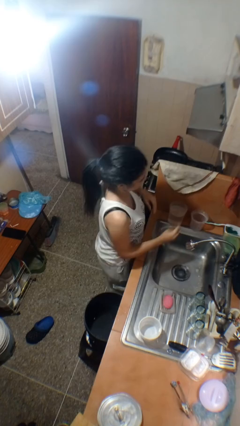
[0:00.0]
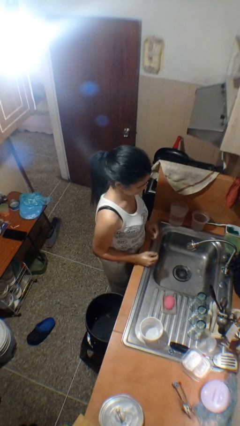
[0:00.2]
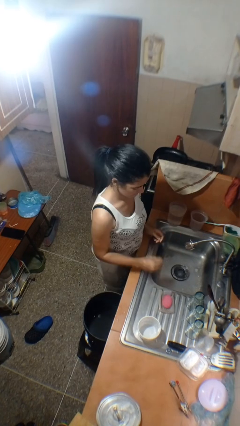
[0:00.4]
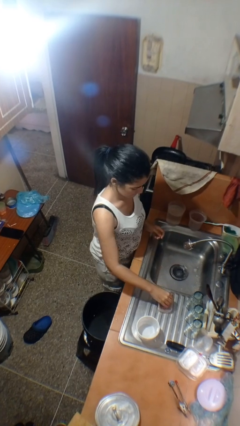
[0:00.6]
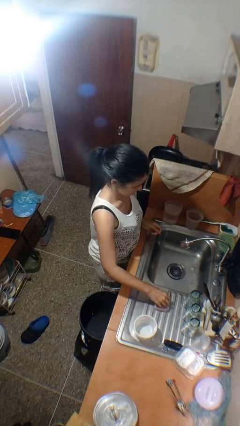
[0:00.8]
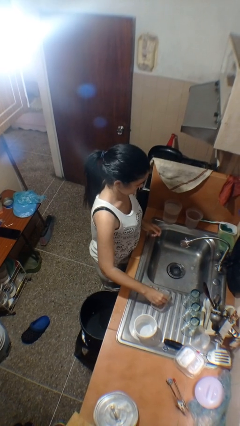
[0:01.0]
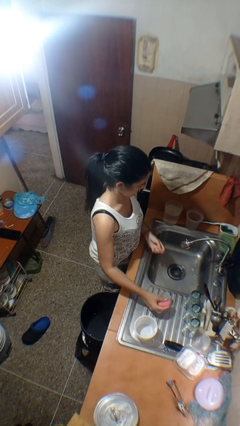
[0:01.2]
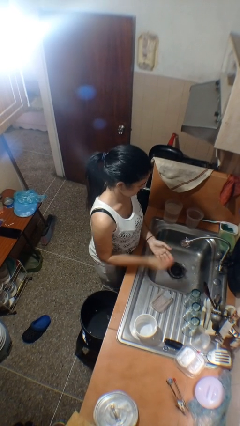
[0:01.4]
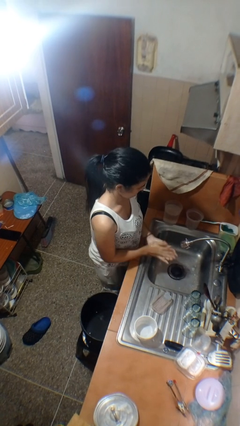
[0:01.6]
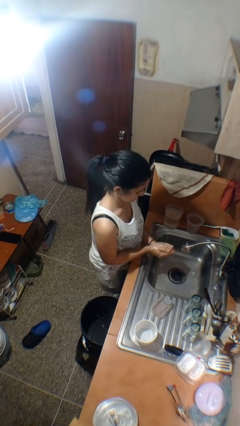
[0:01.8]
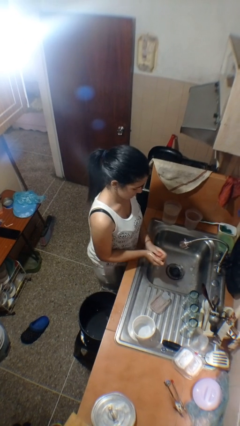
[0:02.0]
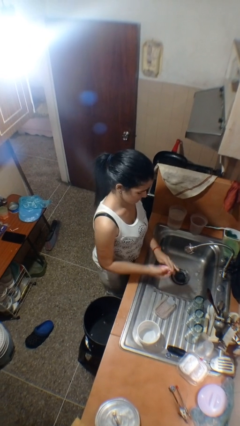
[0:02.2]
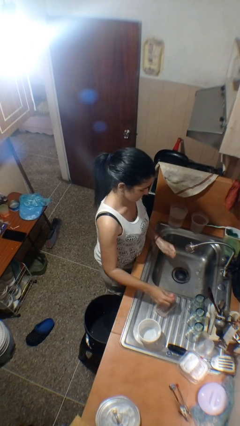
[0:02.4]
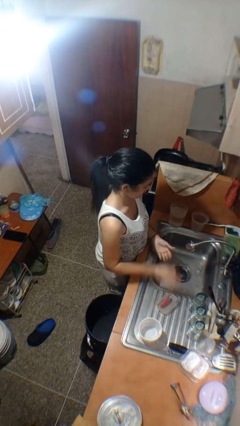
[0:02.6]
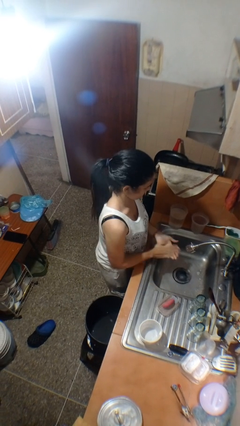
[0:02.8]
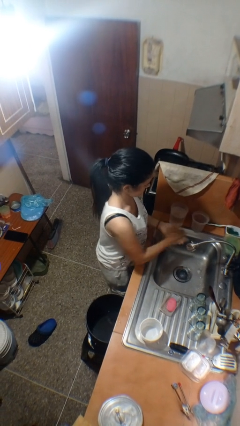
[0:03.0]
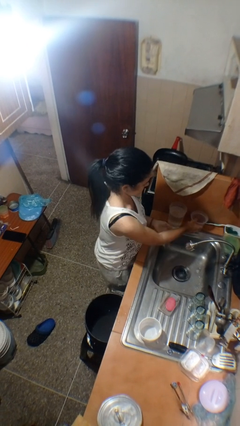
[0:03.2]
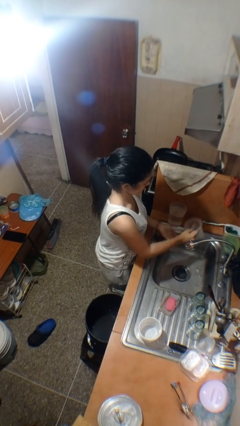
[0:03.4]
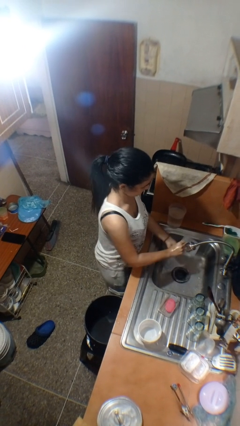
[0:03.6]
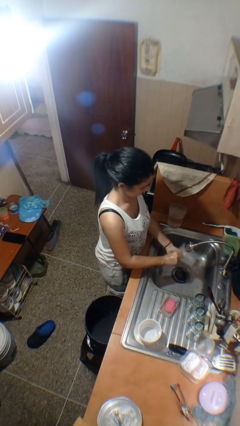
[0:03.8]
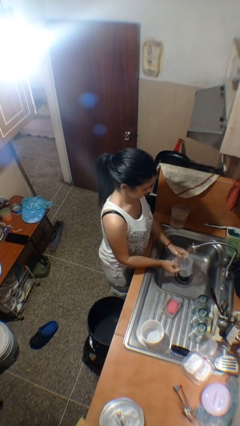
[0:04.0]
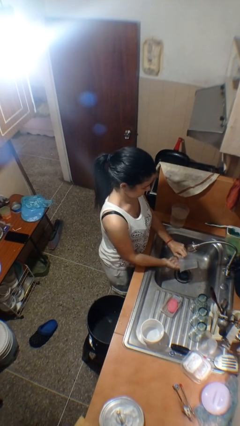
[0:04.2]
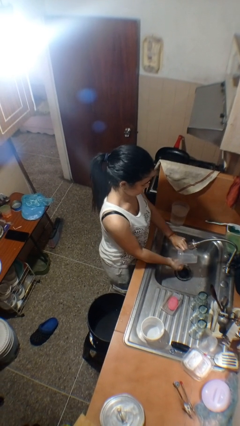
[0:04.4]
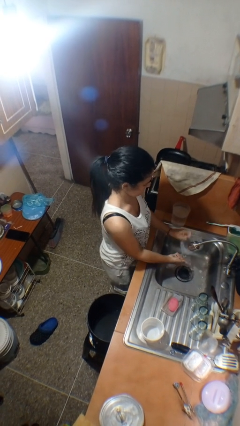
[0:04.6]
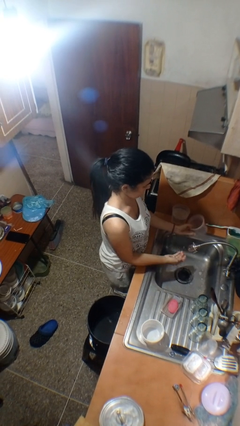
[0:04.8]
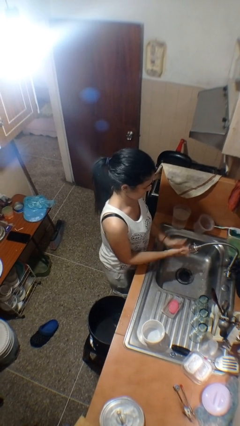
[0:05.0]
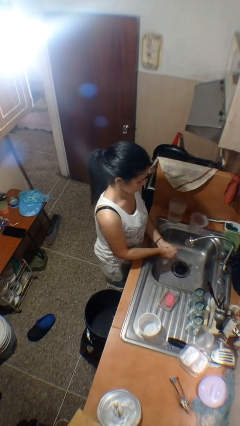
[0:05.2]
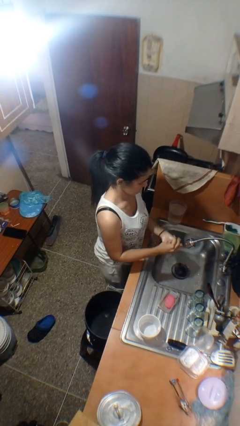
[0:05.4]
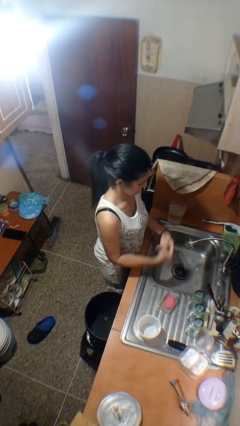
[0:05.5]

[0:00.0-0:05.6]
person washes hands

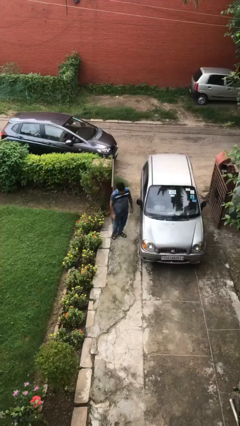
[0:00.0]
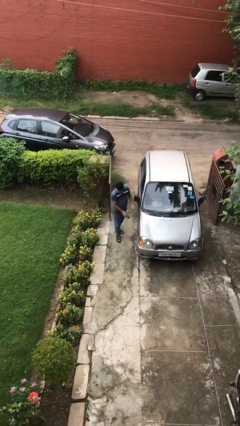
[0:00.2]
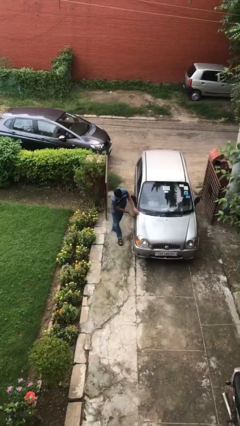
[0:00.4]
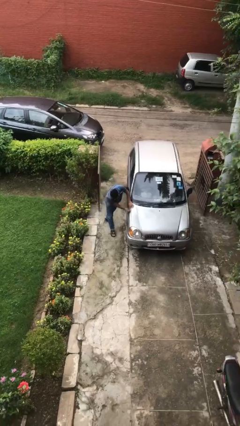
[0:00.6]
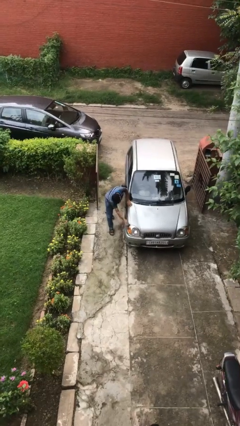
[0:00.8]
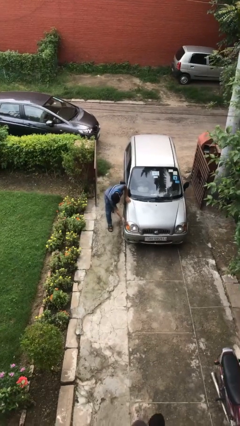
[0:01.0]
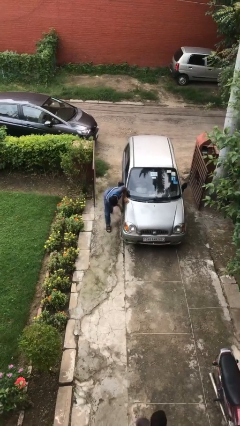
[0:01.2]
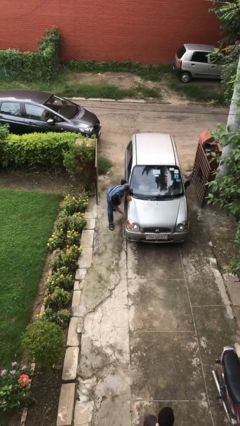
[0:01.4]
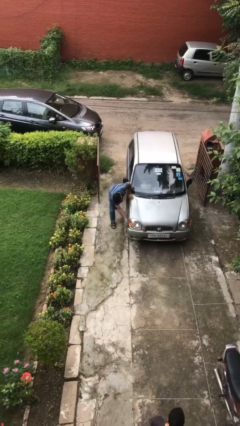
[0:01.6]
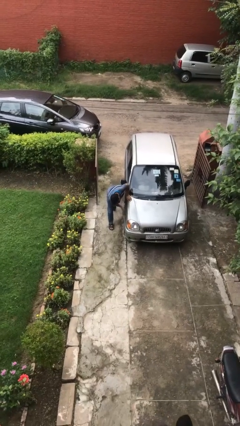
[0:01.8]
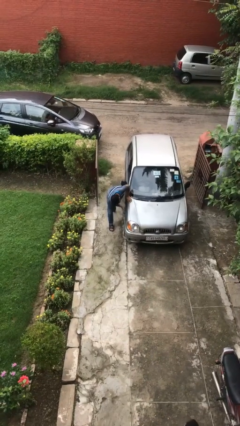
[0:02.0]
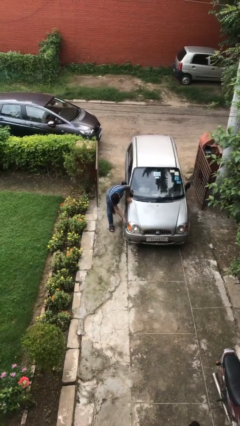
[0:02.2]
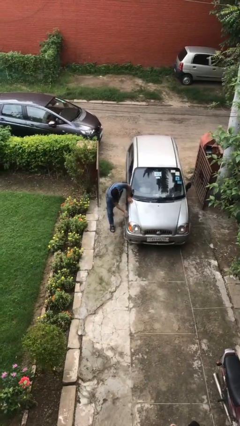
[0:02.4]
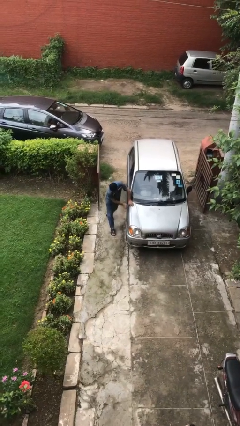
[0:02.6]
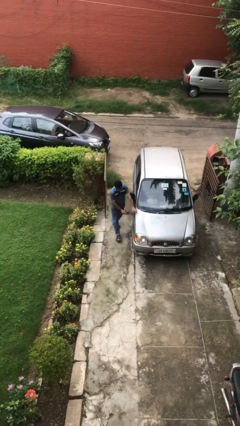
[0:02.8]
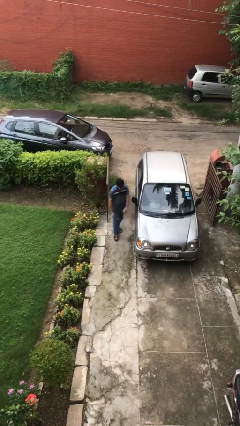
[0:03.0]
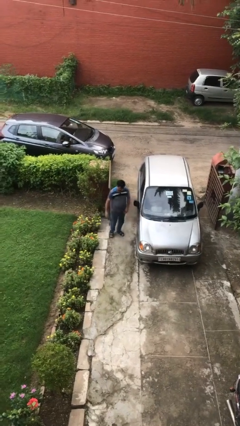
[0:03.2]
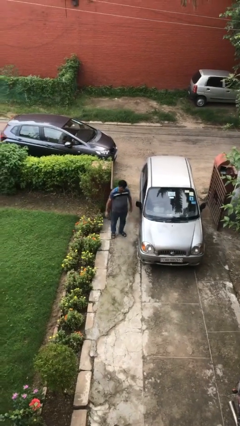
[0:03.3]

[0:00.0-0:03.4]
person polishes car with rag

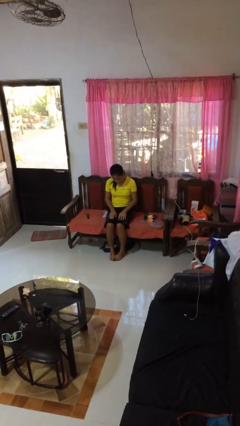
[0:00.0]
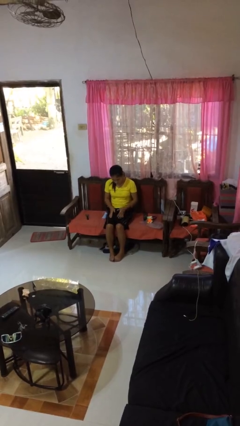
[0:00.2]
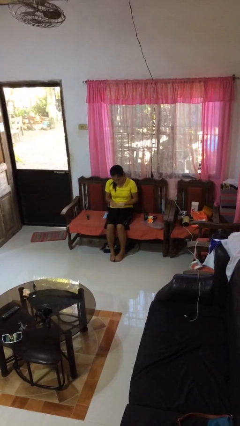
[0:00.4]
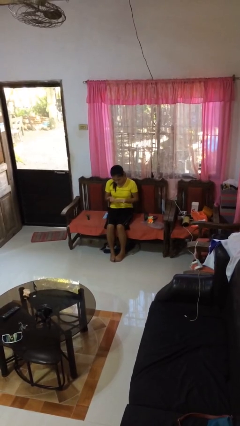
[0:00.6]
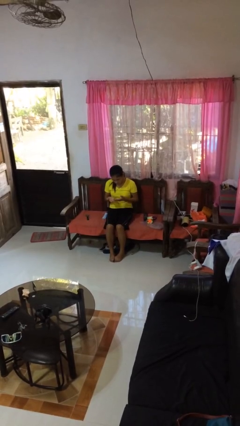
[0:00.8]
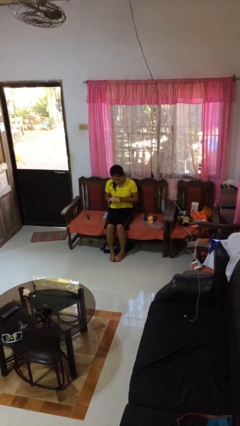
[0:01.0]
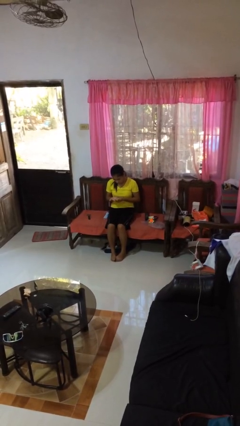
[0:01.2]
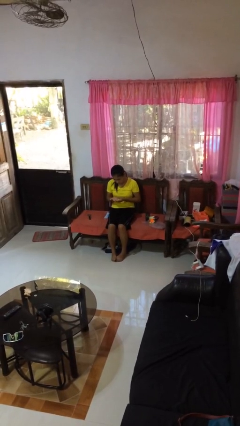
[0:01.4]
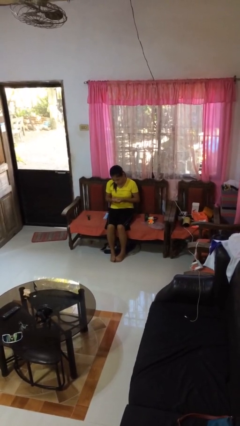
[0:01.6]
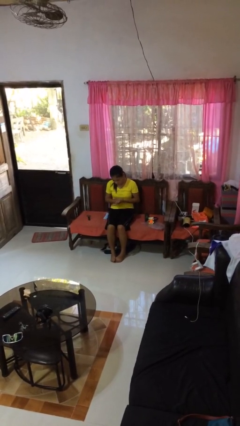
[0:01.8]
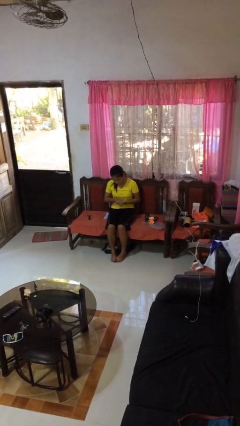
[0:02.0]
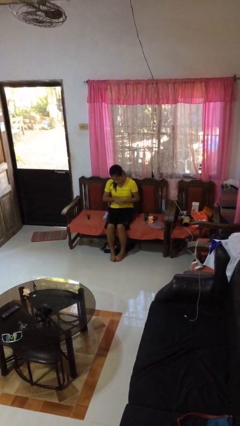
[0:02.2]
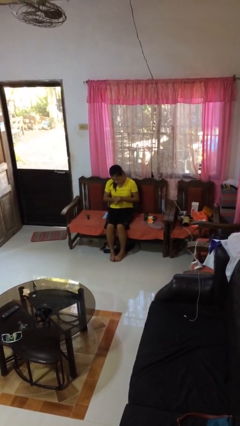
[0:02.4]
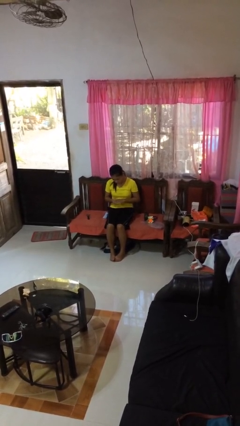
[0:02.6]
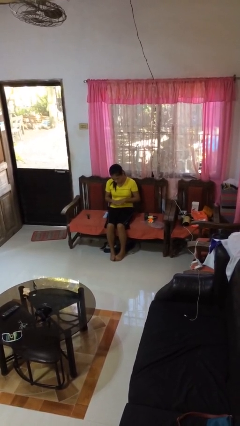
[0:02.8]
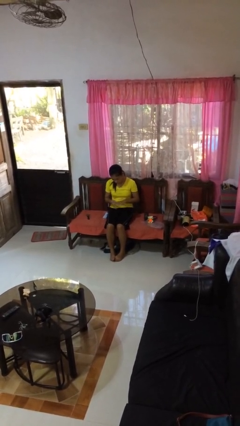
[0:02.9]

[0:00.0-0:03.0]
person looks at hands in lap

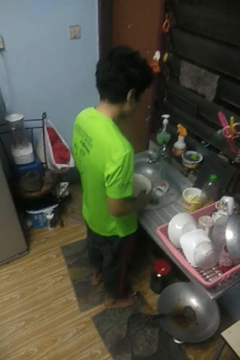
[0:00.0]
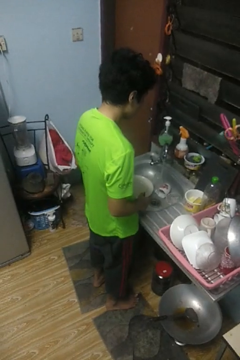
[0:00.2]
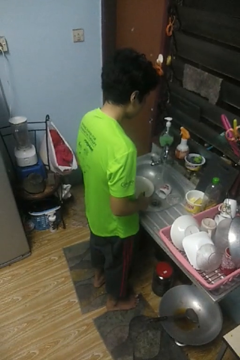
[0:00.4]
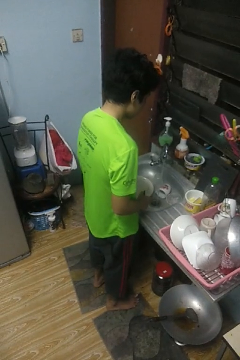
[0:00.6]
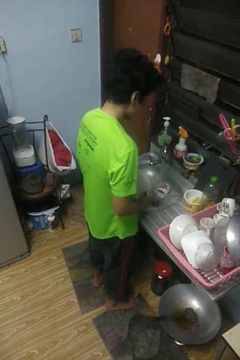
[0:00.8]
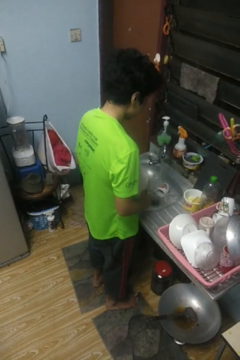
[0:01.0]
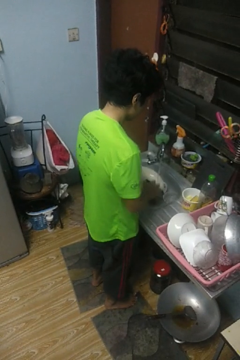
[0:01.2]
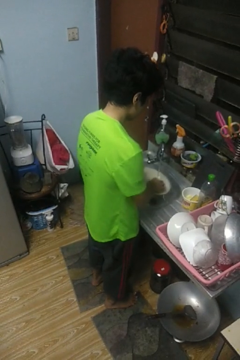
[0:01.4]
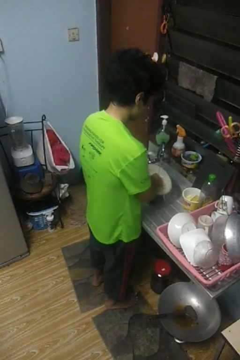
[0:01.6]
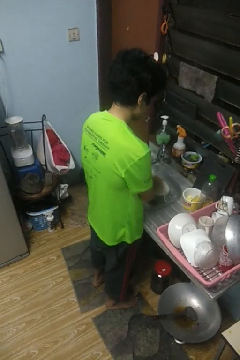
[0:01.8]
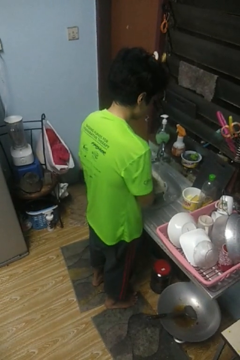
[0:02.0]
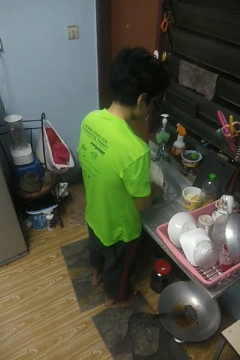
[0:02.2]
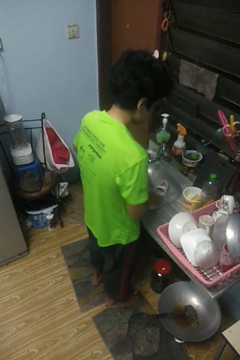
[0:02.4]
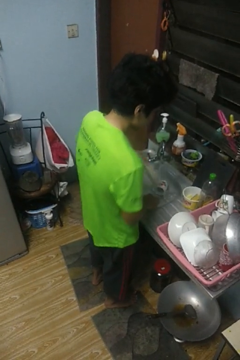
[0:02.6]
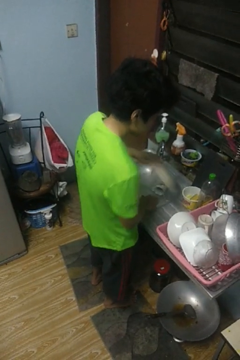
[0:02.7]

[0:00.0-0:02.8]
person washes dish

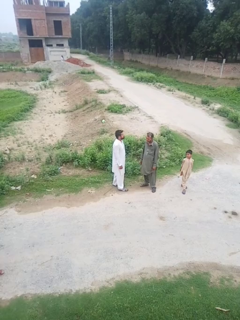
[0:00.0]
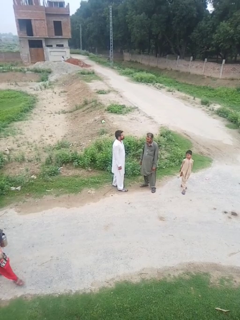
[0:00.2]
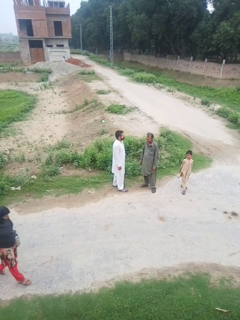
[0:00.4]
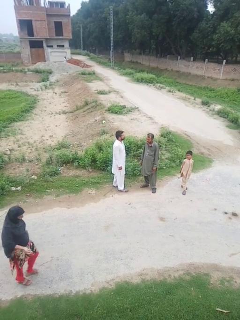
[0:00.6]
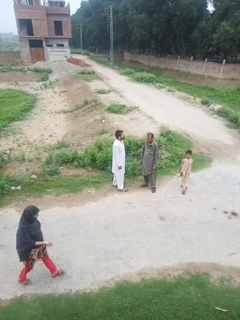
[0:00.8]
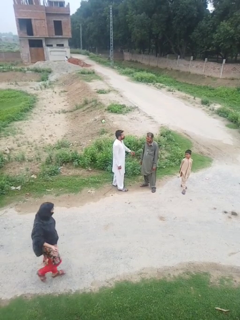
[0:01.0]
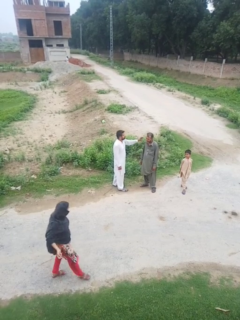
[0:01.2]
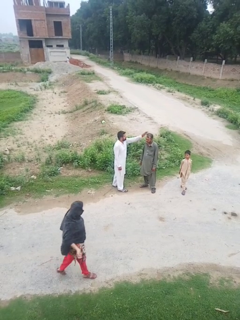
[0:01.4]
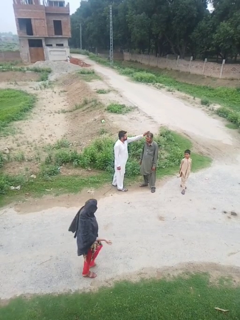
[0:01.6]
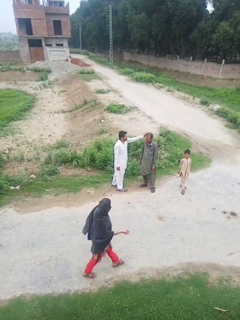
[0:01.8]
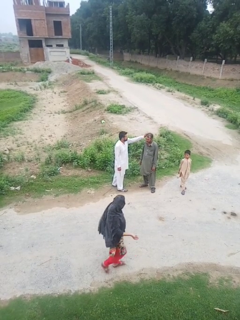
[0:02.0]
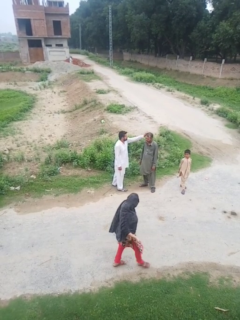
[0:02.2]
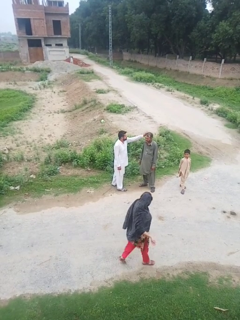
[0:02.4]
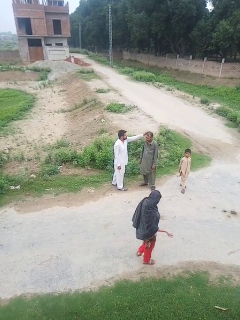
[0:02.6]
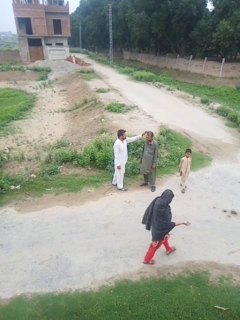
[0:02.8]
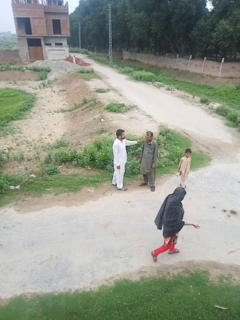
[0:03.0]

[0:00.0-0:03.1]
person touches face of person

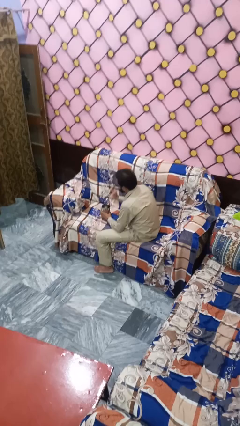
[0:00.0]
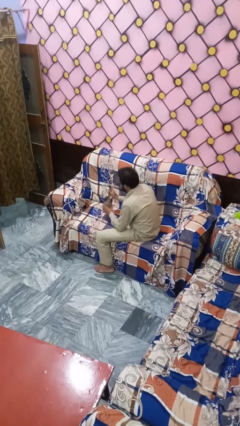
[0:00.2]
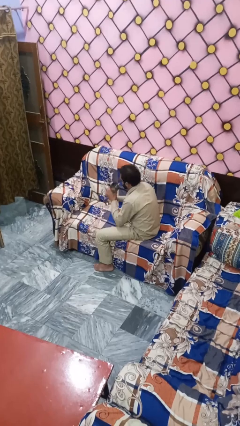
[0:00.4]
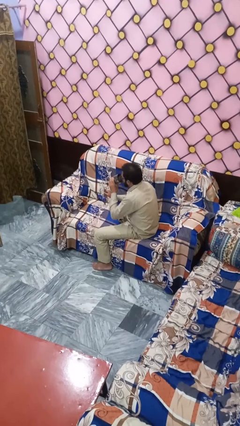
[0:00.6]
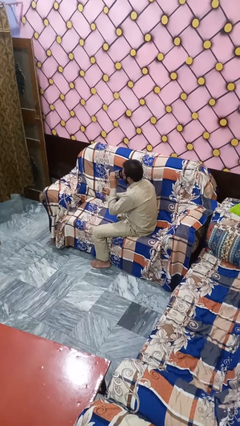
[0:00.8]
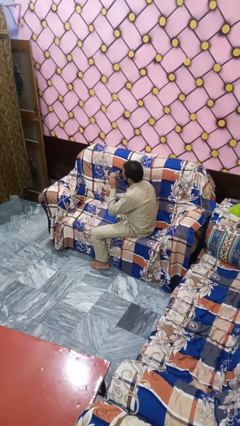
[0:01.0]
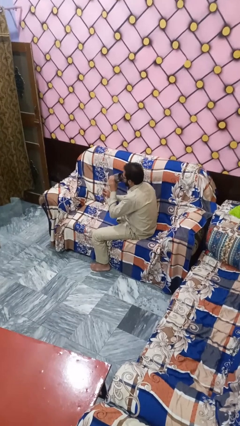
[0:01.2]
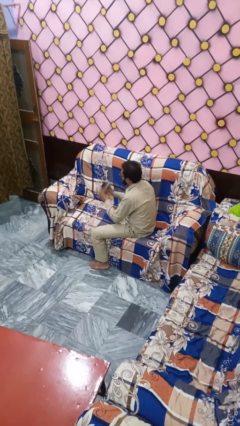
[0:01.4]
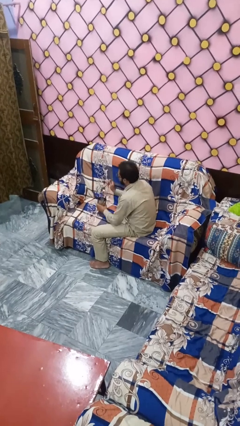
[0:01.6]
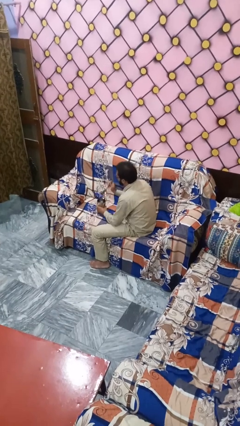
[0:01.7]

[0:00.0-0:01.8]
person drinks from mug
